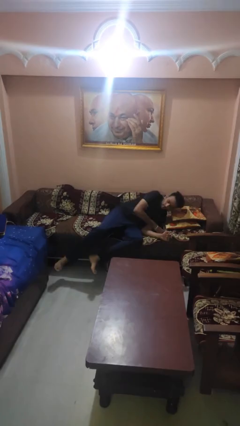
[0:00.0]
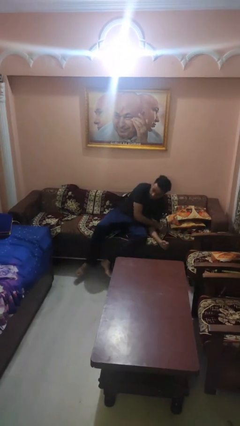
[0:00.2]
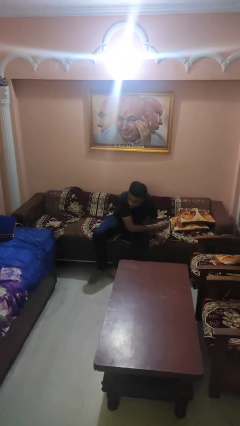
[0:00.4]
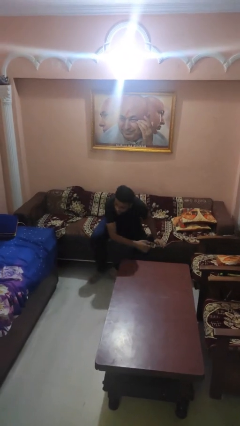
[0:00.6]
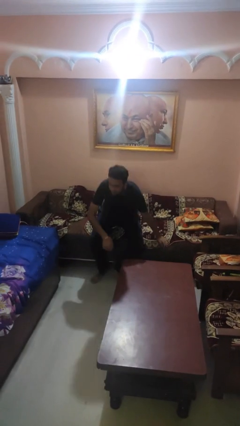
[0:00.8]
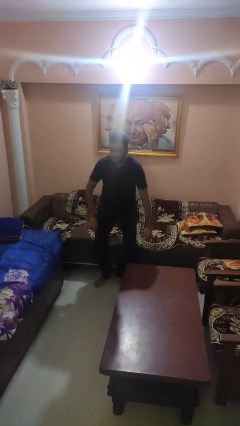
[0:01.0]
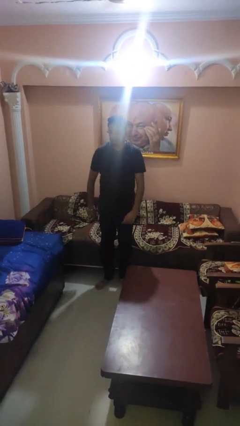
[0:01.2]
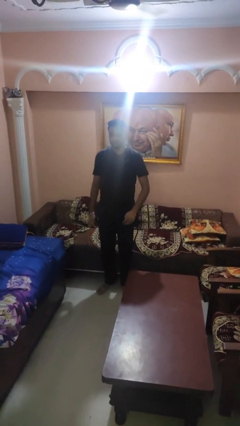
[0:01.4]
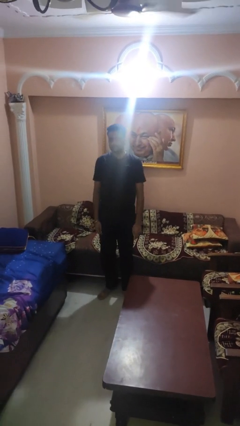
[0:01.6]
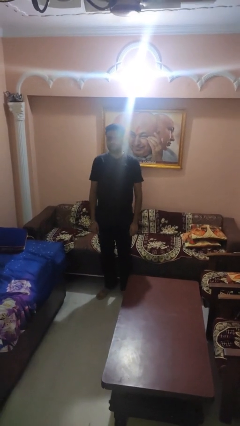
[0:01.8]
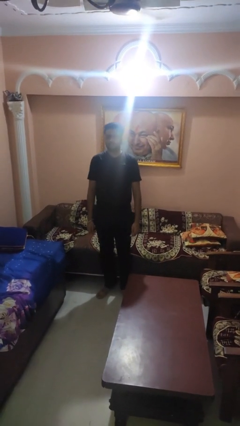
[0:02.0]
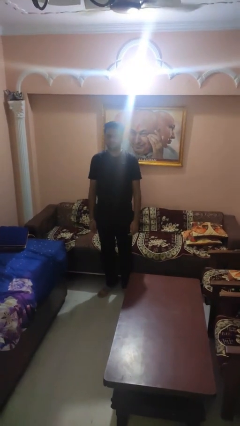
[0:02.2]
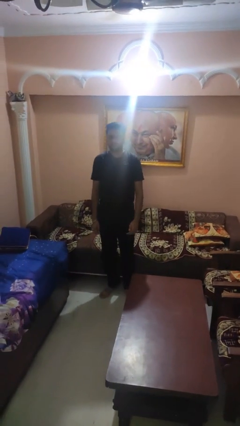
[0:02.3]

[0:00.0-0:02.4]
person stands up

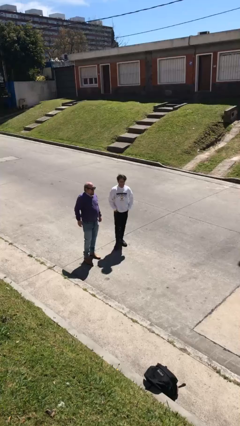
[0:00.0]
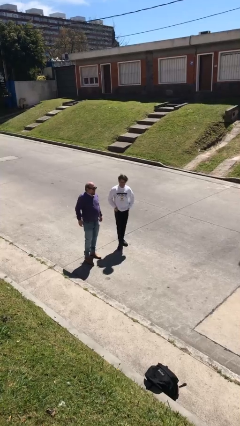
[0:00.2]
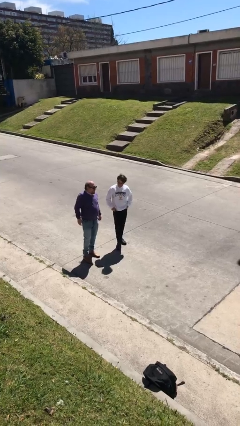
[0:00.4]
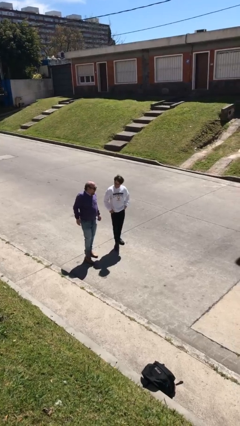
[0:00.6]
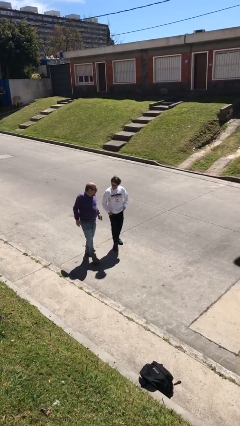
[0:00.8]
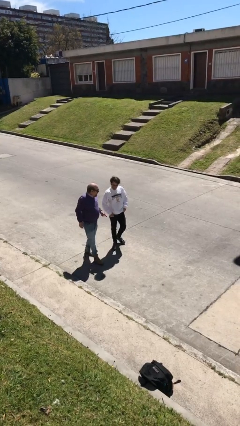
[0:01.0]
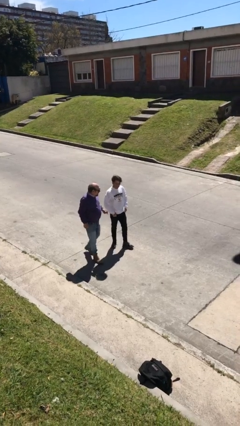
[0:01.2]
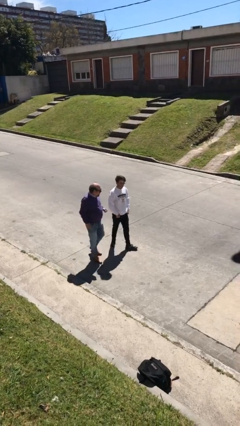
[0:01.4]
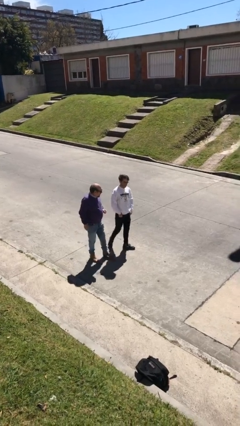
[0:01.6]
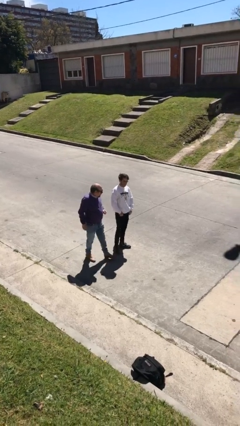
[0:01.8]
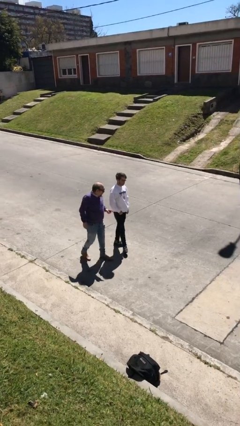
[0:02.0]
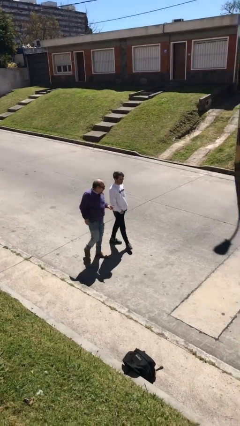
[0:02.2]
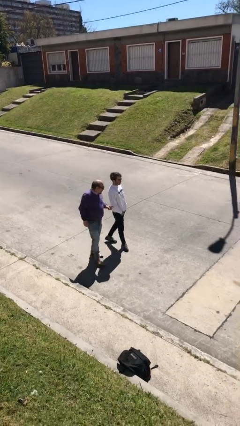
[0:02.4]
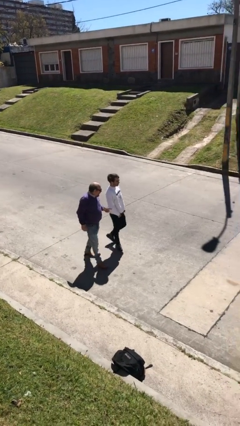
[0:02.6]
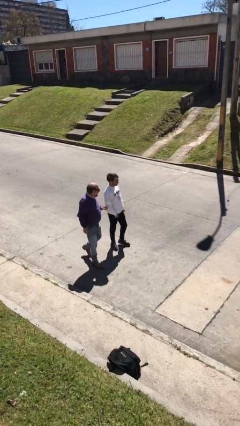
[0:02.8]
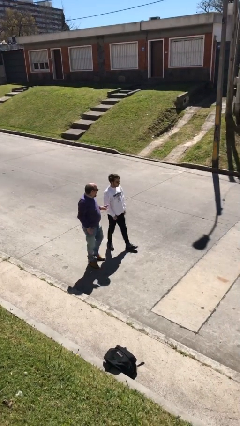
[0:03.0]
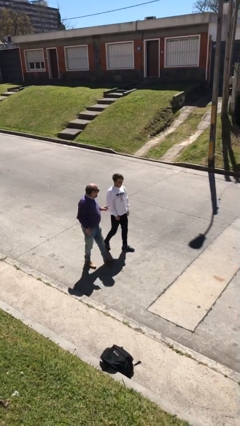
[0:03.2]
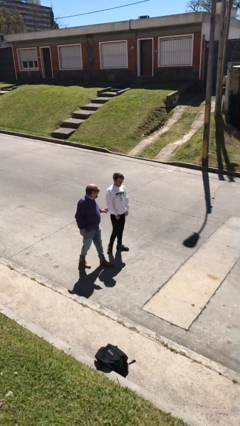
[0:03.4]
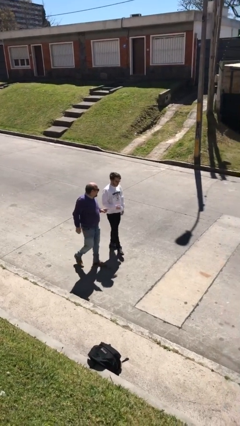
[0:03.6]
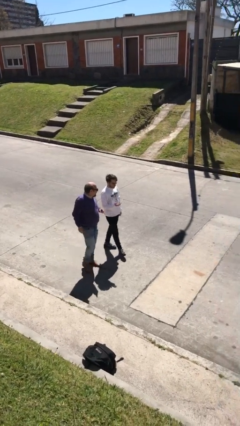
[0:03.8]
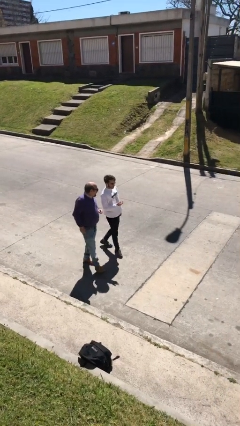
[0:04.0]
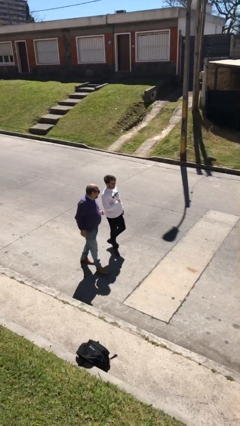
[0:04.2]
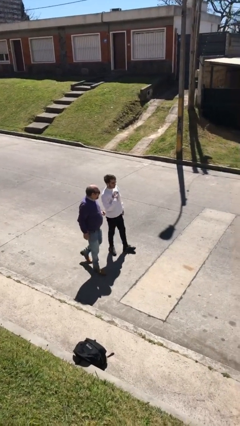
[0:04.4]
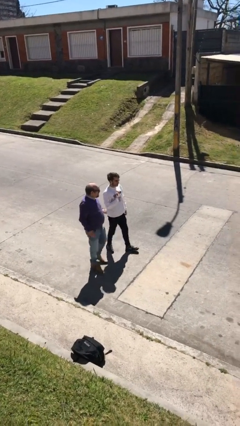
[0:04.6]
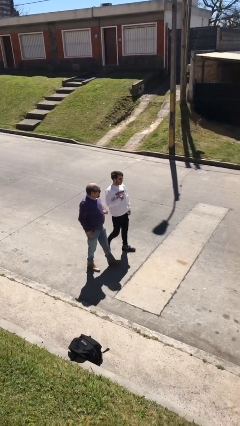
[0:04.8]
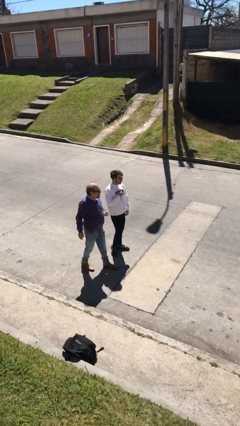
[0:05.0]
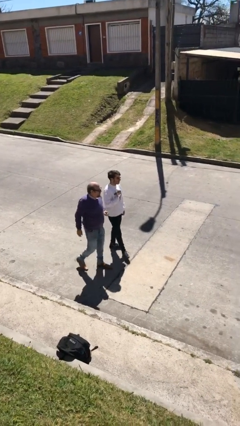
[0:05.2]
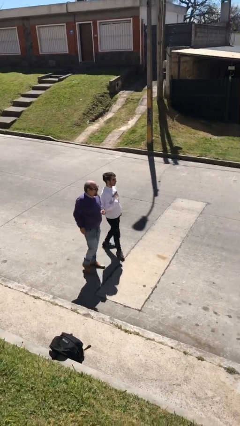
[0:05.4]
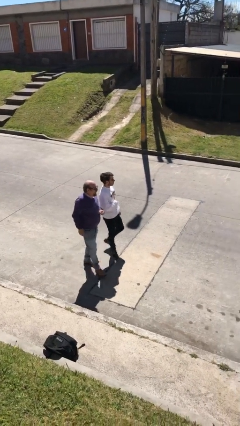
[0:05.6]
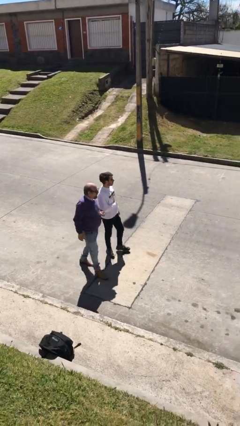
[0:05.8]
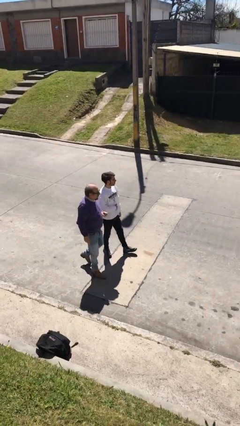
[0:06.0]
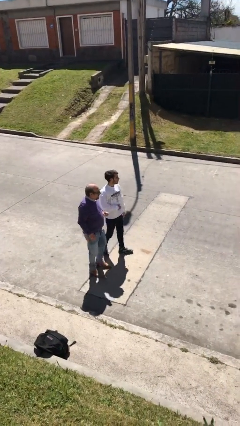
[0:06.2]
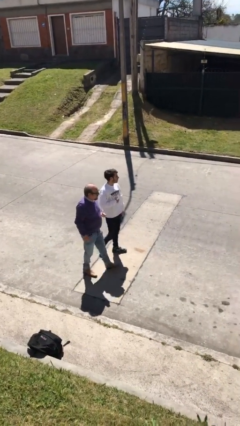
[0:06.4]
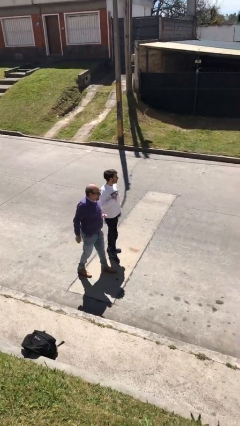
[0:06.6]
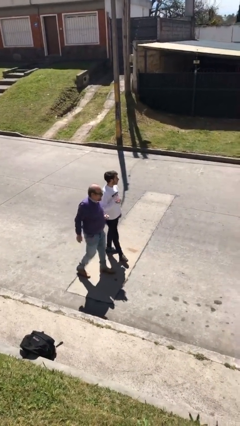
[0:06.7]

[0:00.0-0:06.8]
person talks to person

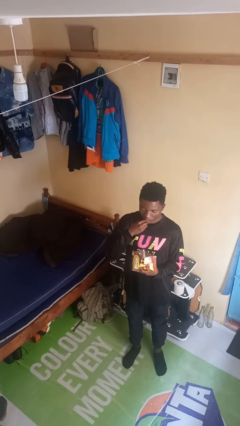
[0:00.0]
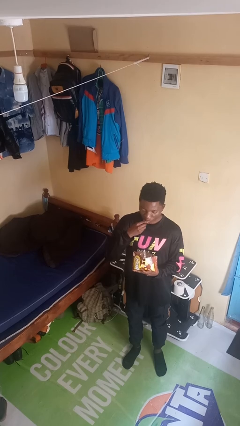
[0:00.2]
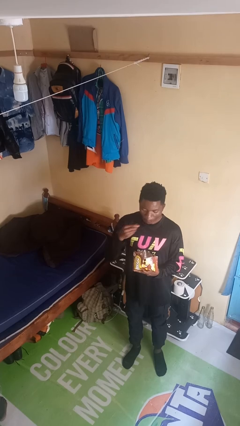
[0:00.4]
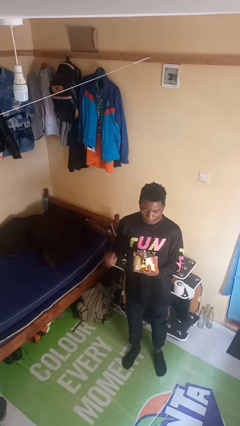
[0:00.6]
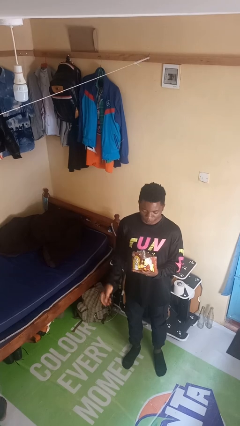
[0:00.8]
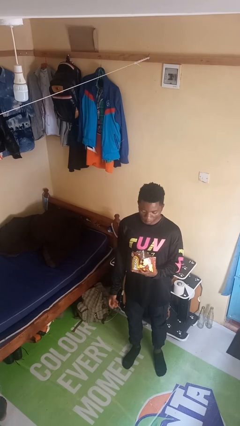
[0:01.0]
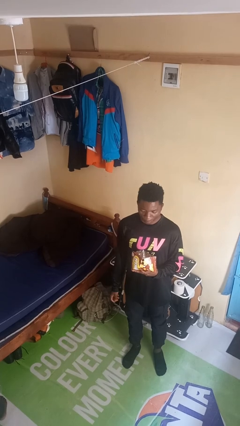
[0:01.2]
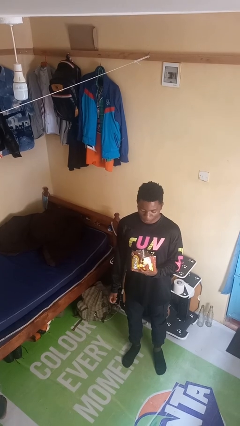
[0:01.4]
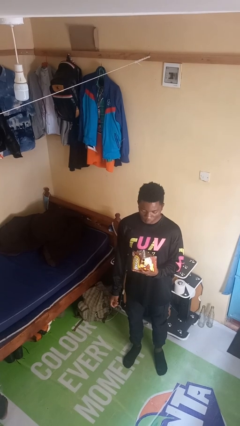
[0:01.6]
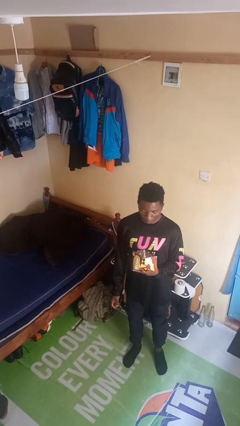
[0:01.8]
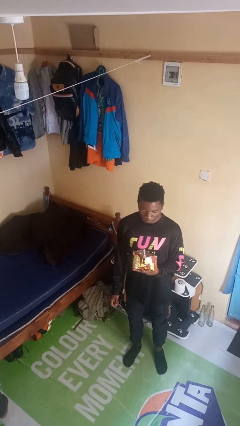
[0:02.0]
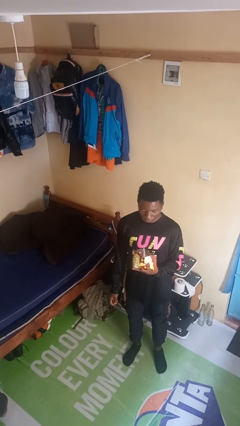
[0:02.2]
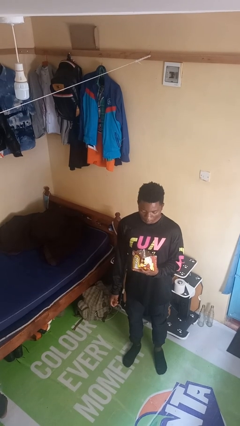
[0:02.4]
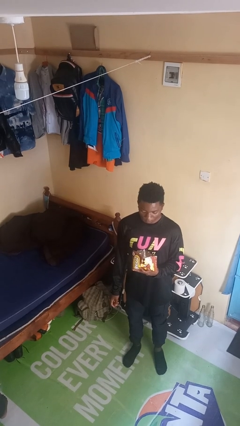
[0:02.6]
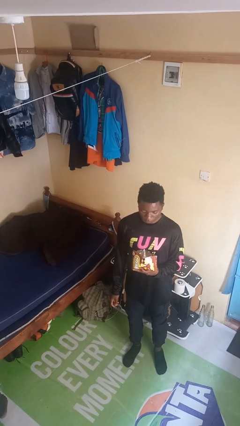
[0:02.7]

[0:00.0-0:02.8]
person eats snack from bag

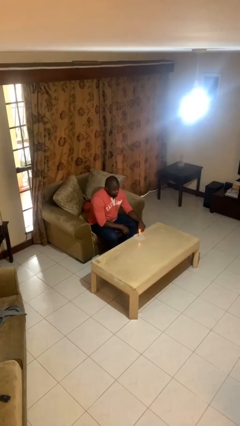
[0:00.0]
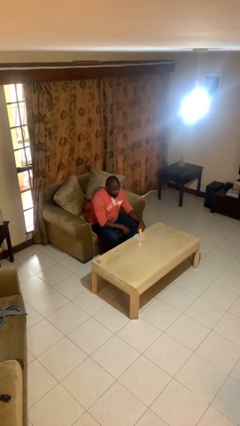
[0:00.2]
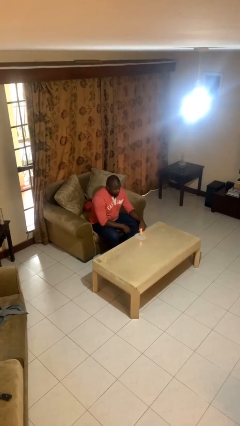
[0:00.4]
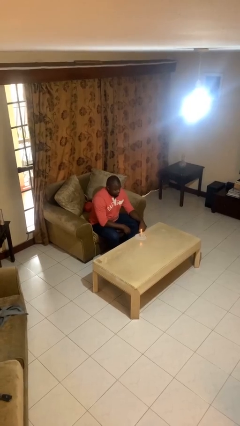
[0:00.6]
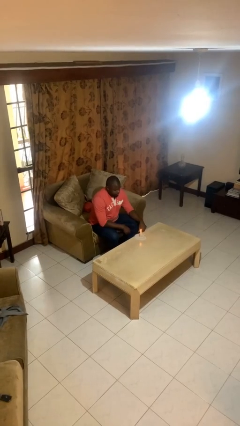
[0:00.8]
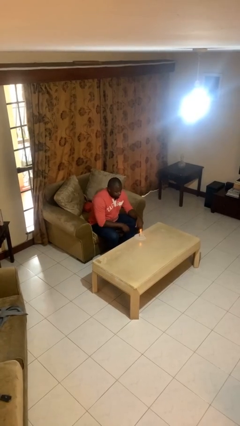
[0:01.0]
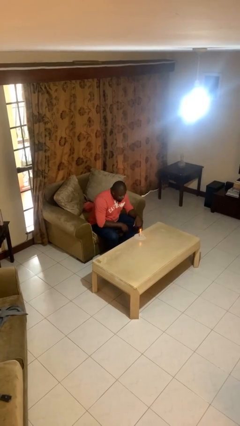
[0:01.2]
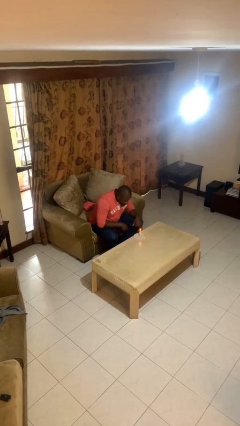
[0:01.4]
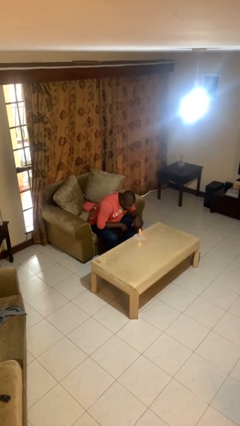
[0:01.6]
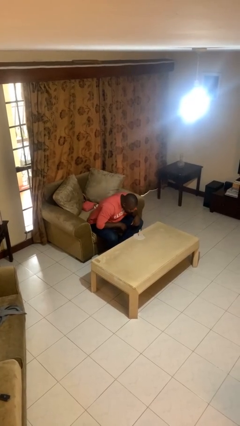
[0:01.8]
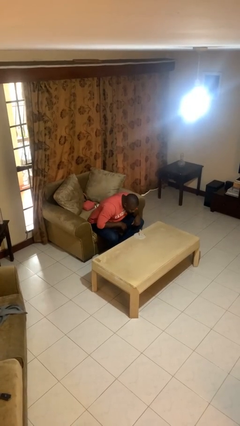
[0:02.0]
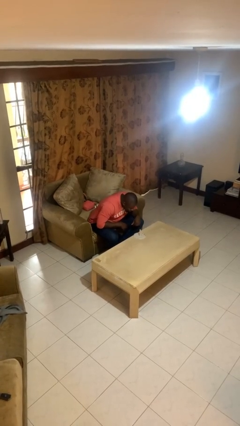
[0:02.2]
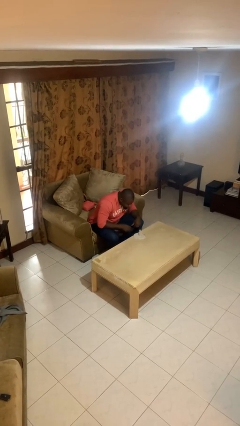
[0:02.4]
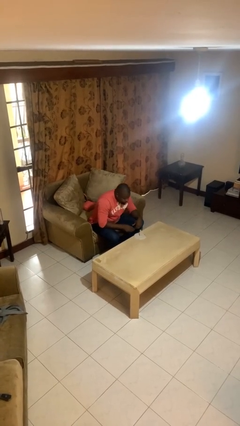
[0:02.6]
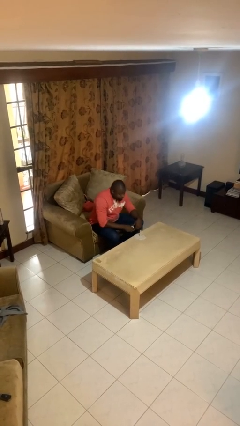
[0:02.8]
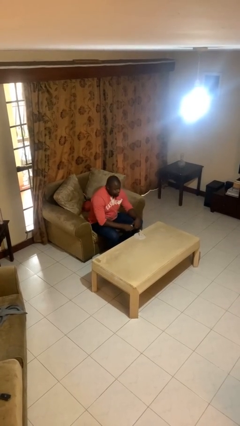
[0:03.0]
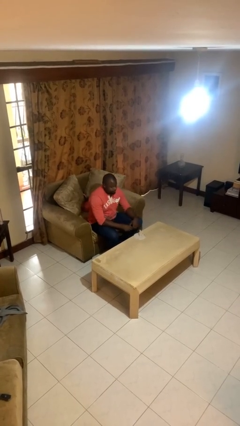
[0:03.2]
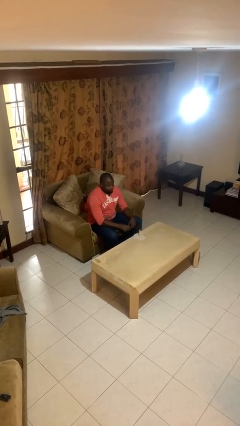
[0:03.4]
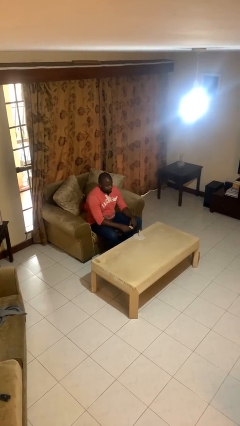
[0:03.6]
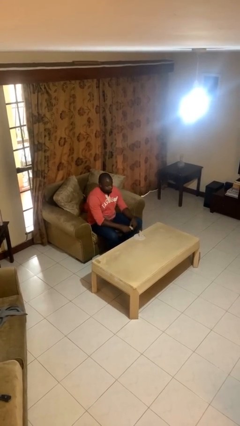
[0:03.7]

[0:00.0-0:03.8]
person extinguishes candle

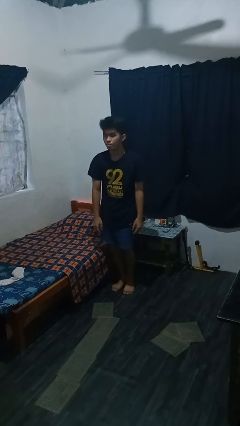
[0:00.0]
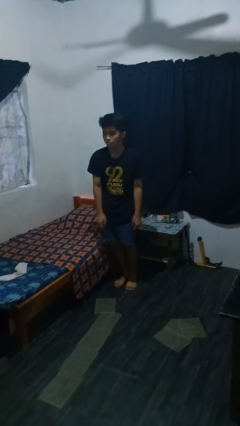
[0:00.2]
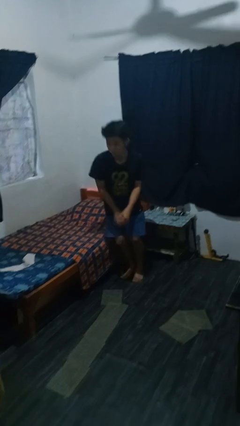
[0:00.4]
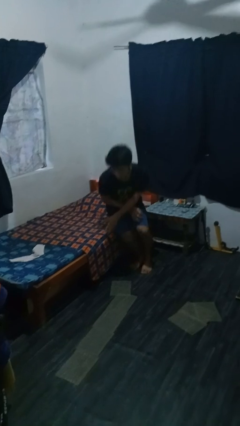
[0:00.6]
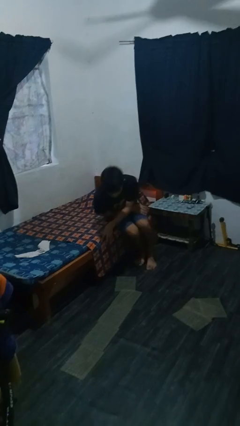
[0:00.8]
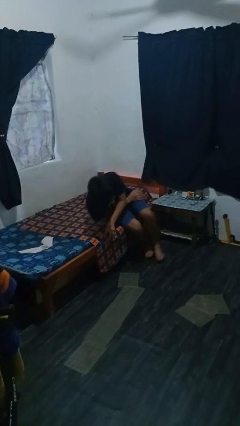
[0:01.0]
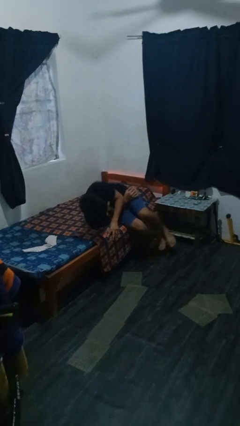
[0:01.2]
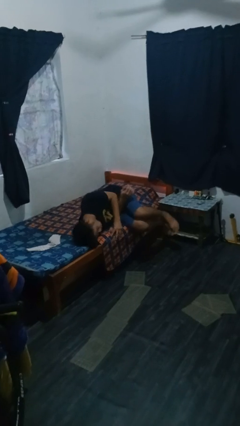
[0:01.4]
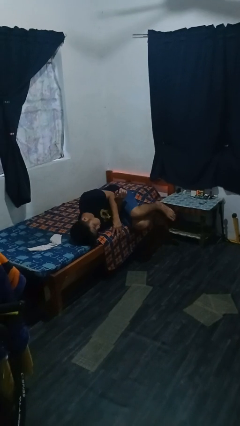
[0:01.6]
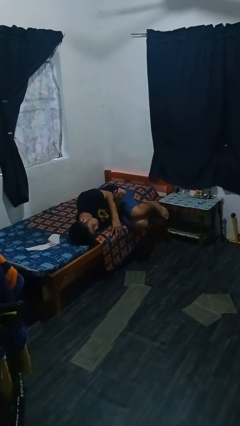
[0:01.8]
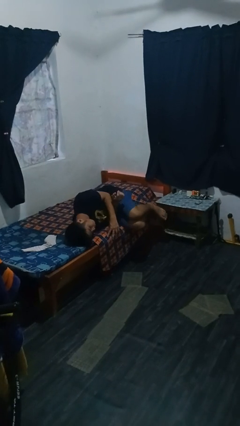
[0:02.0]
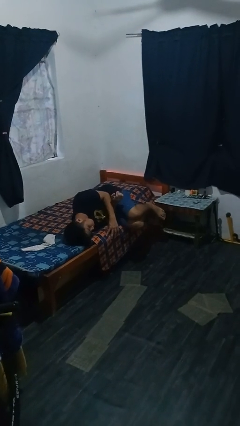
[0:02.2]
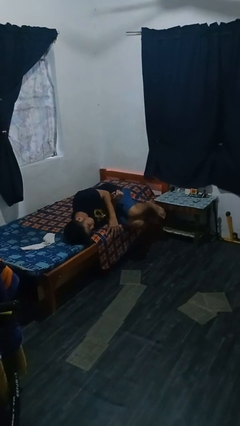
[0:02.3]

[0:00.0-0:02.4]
person lies down on bed
